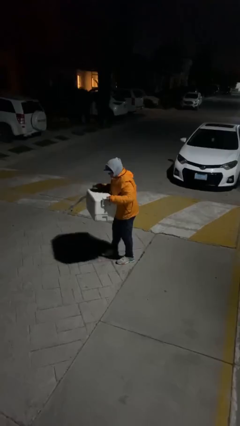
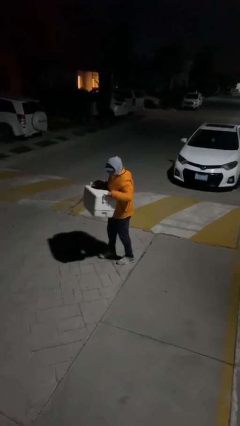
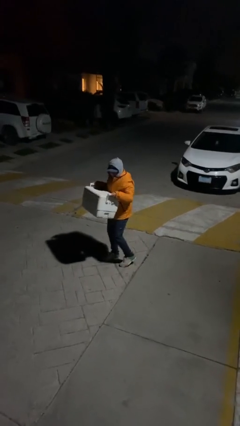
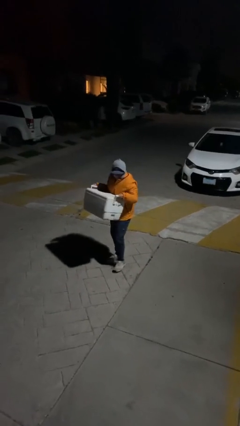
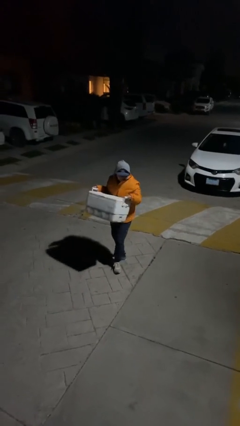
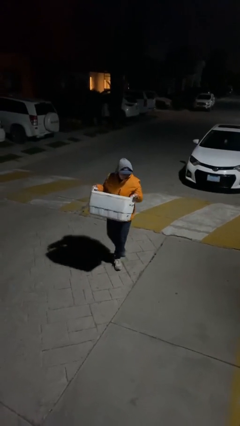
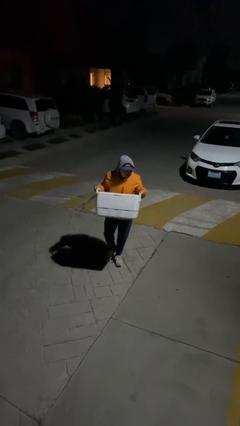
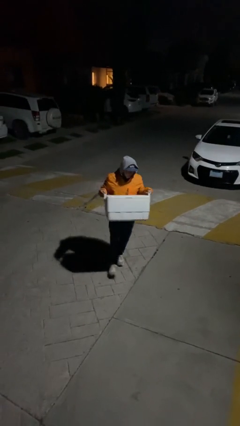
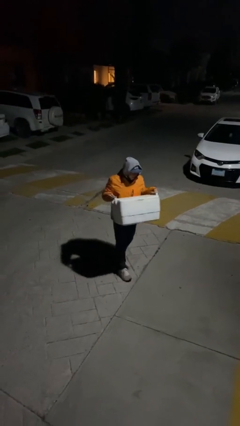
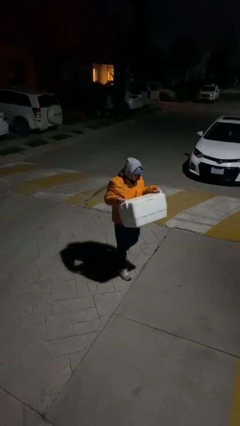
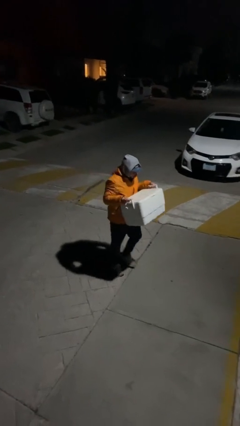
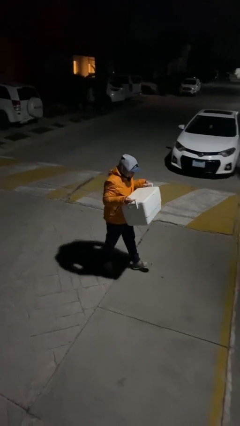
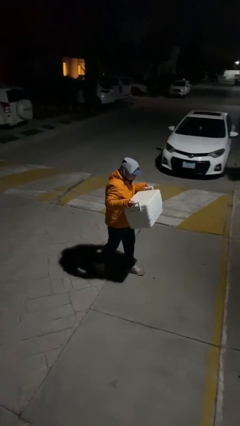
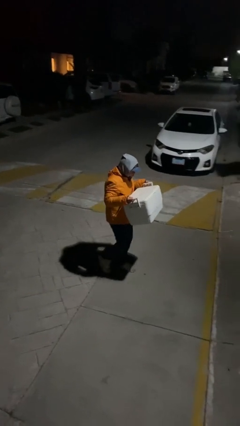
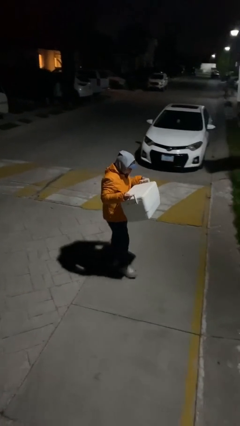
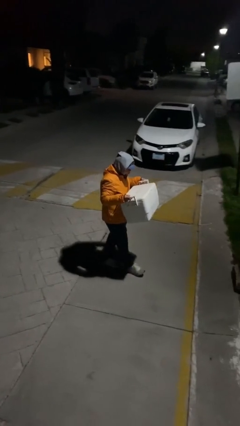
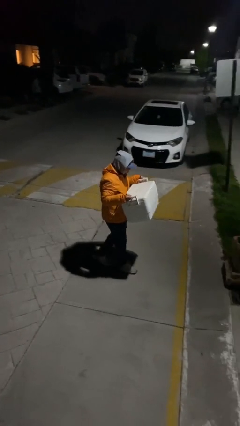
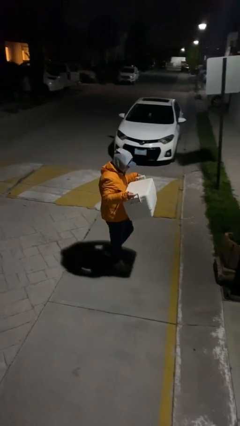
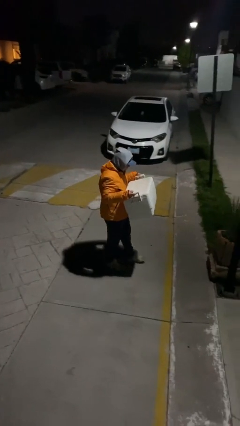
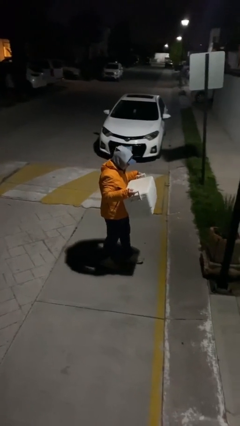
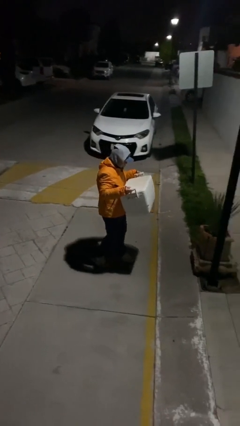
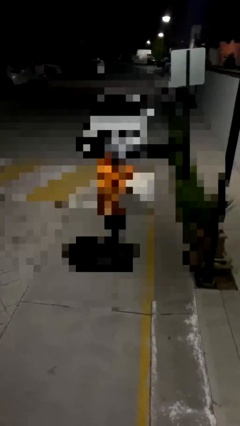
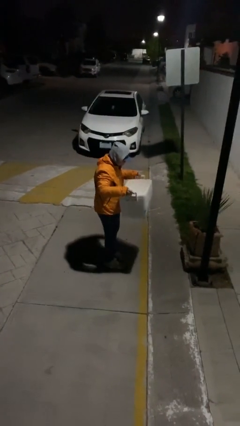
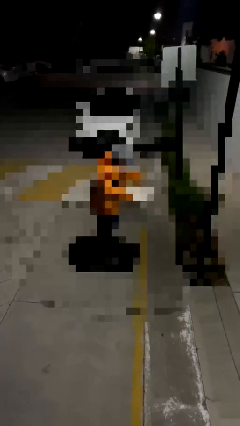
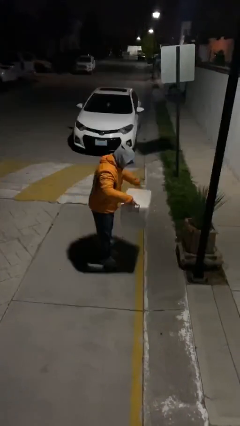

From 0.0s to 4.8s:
person carries heavy object

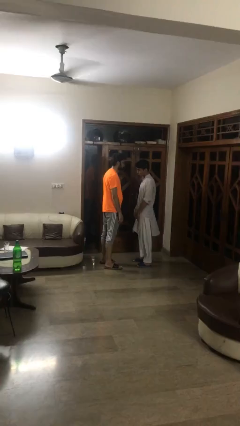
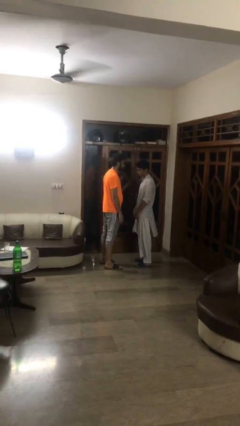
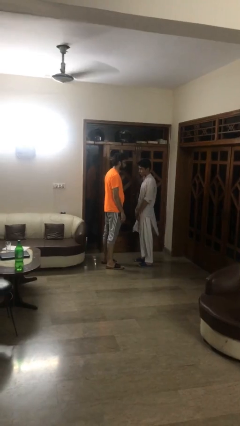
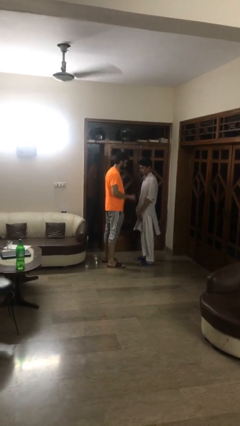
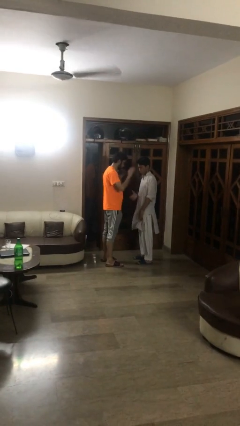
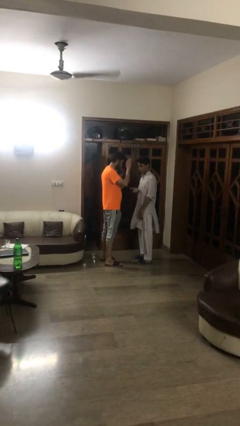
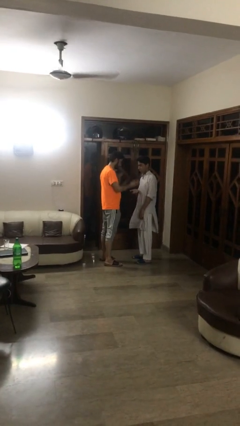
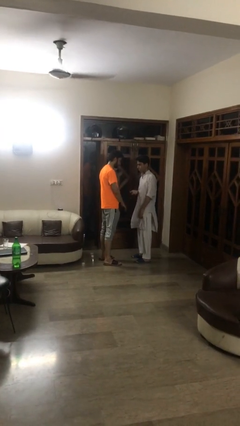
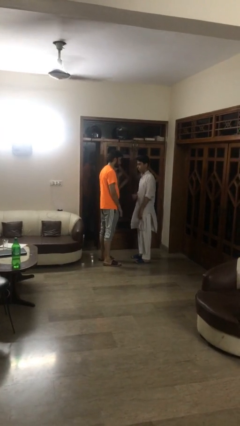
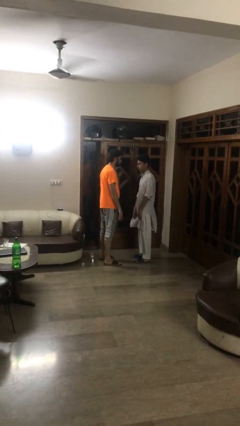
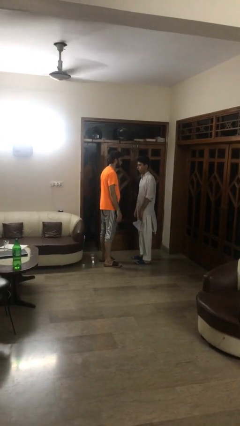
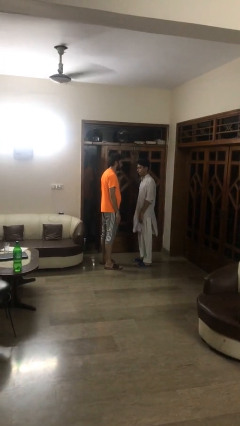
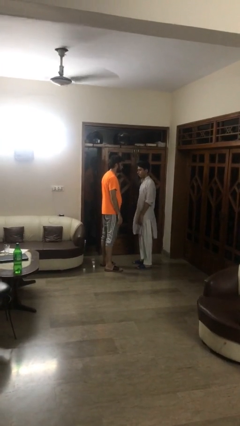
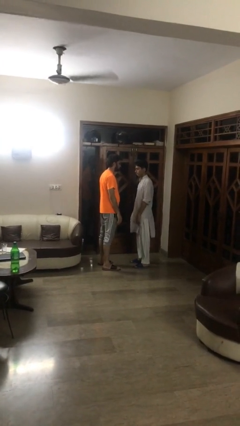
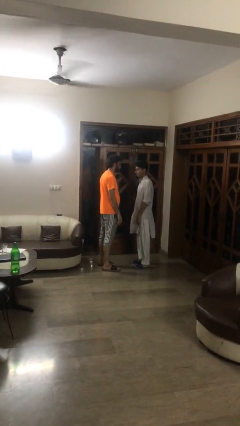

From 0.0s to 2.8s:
person highfives hand

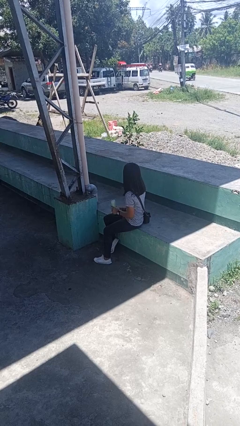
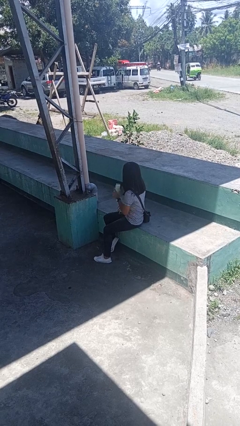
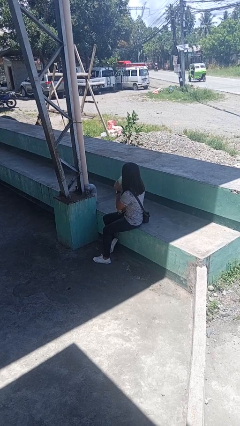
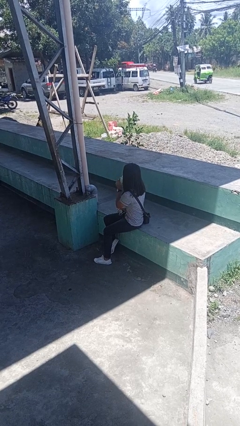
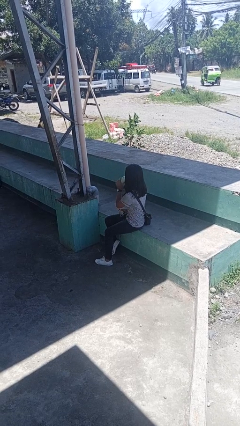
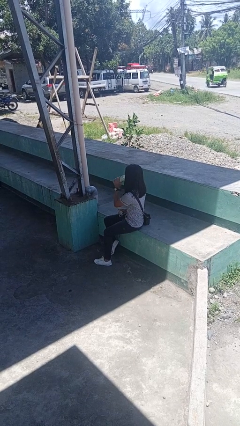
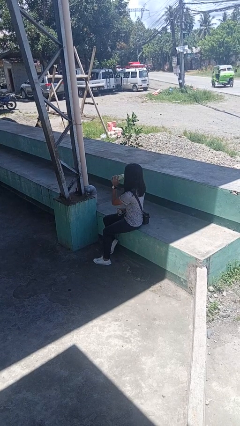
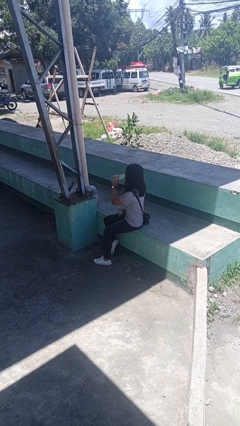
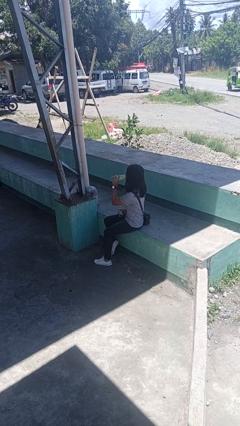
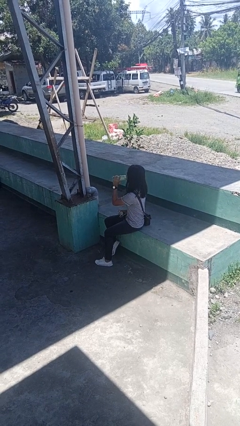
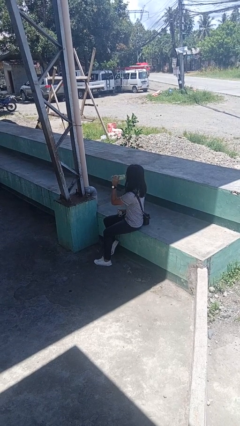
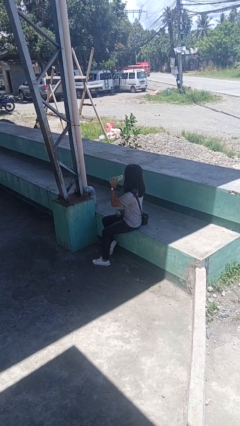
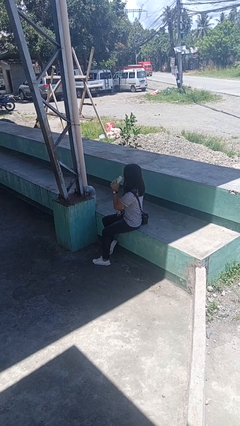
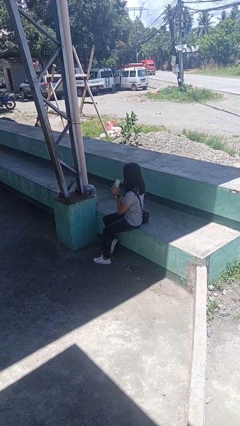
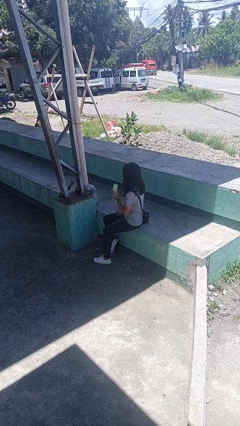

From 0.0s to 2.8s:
person drinks from bottle

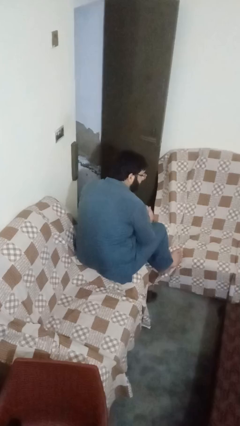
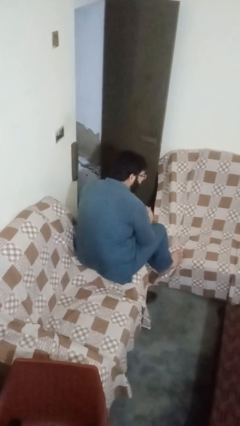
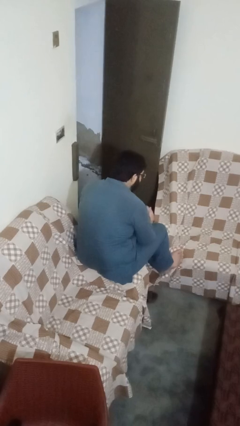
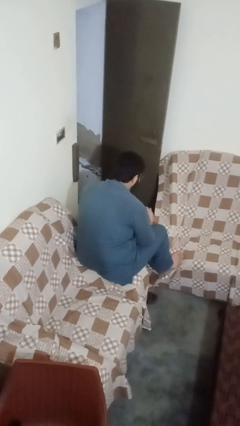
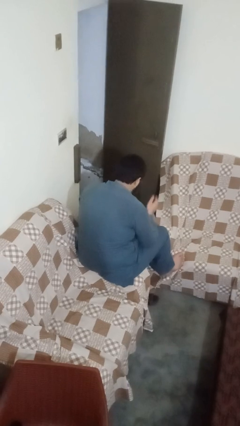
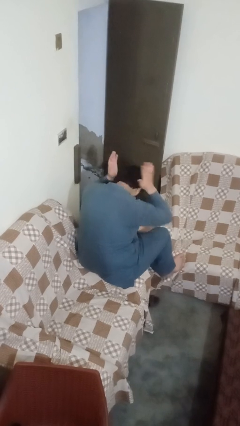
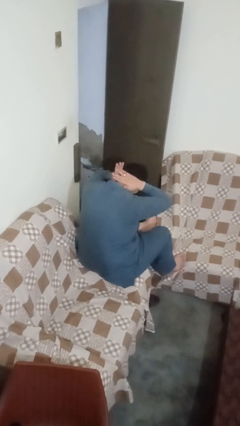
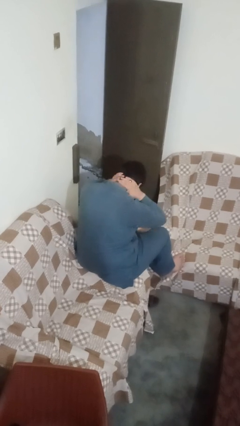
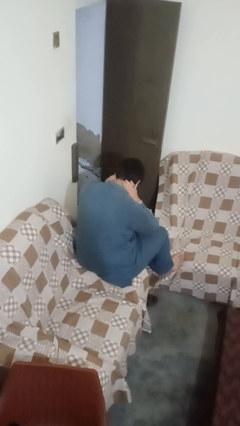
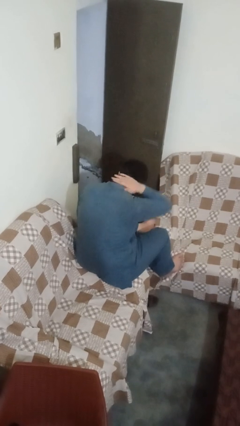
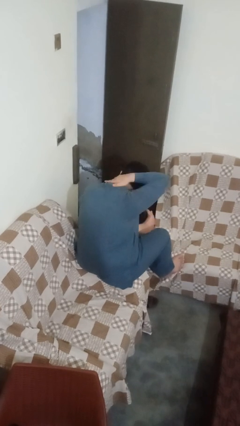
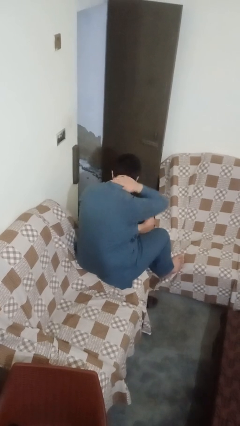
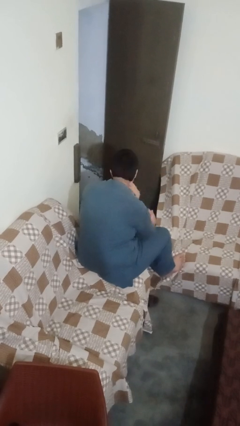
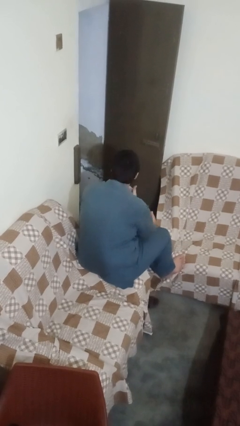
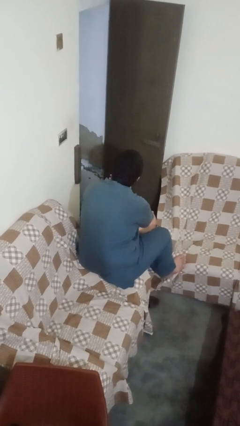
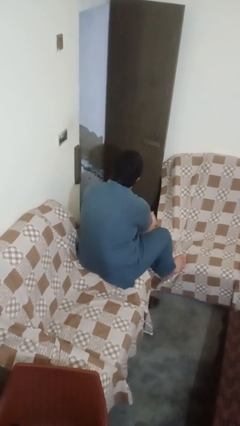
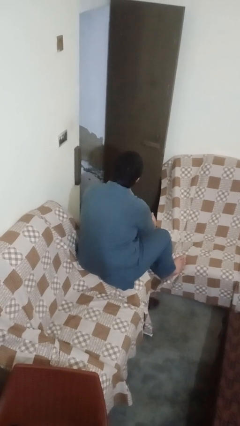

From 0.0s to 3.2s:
person rubs neck

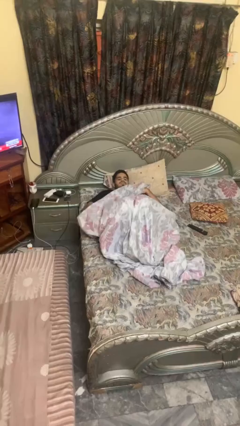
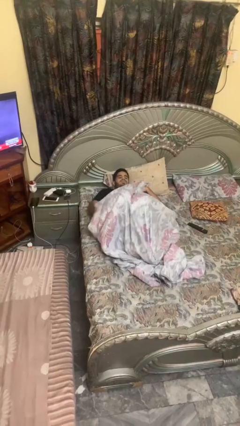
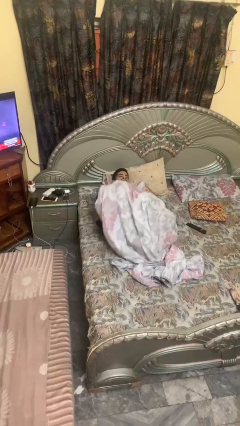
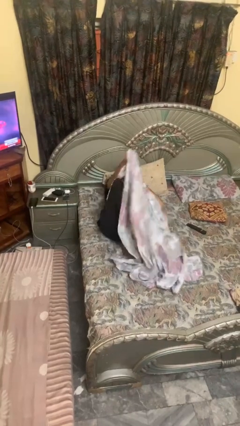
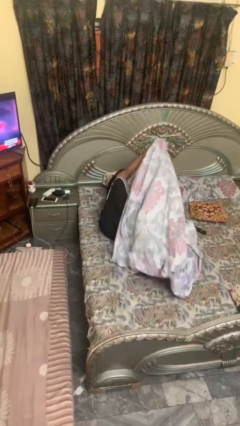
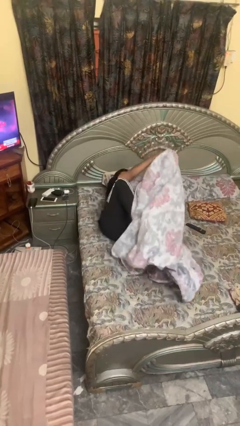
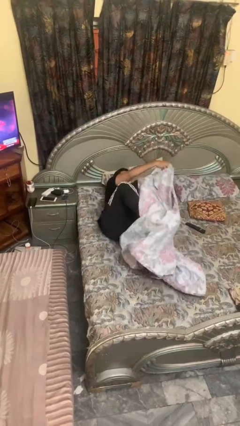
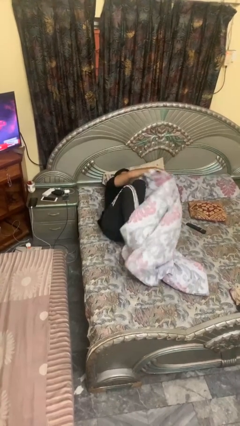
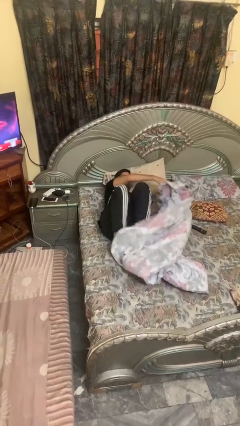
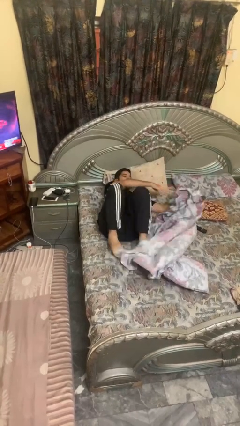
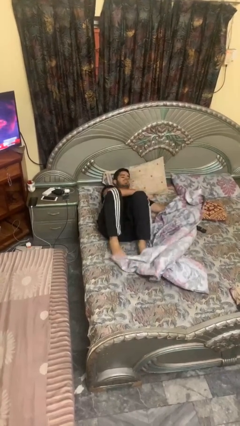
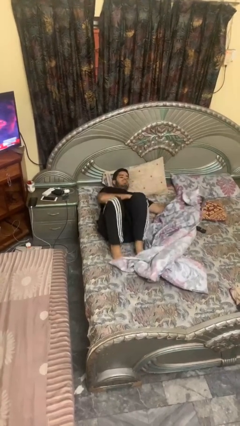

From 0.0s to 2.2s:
person uncovers with bedsheets

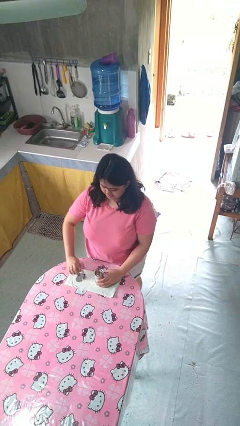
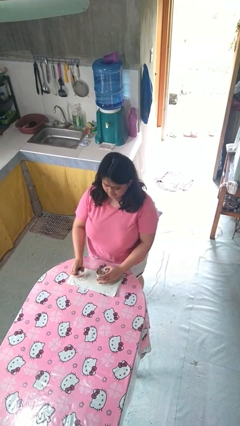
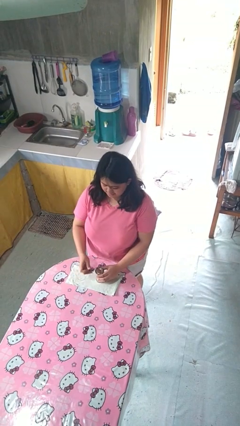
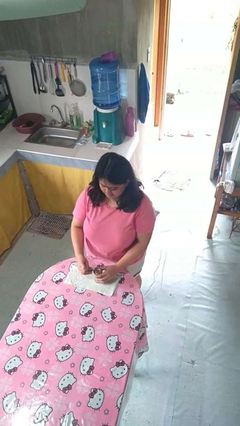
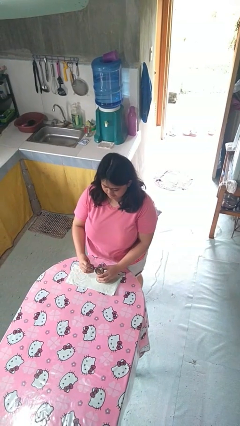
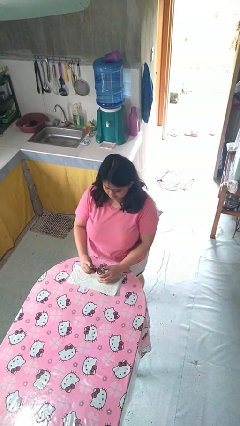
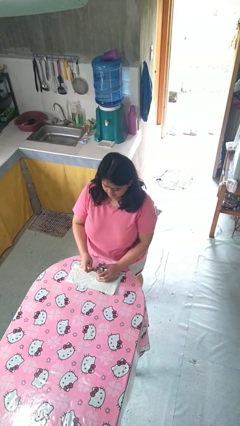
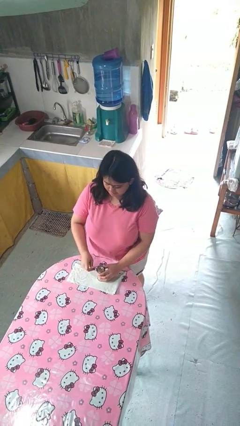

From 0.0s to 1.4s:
person opens can with can opener

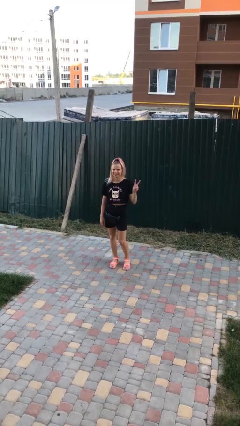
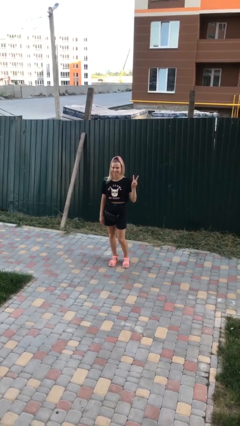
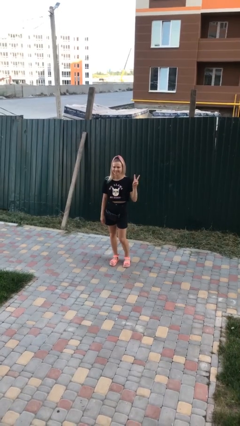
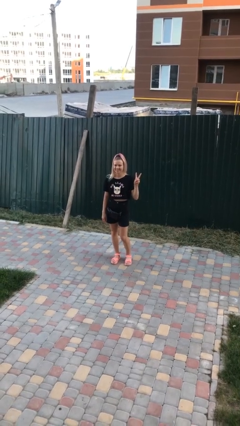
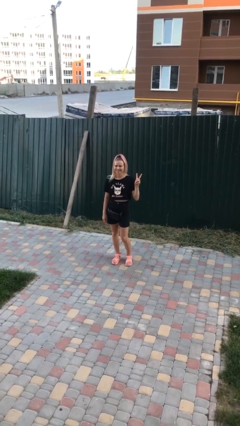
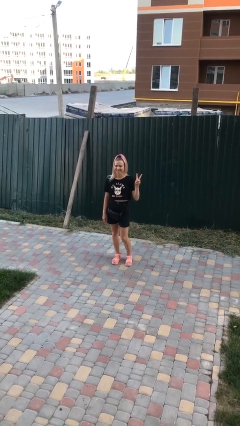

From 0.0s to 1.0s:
person gestures peace
